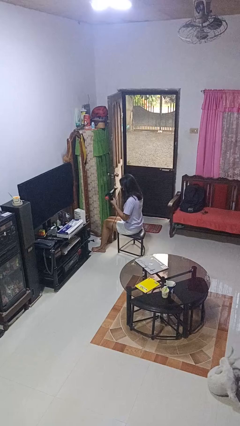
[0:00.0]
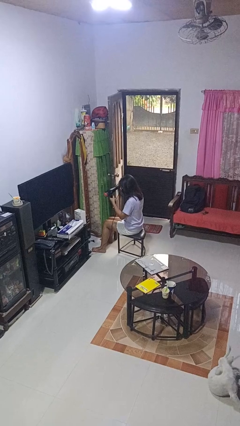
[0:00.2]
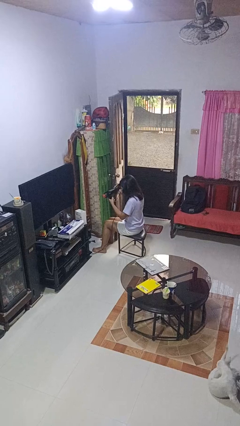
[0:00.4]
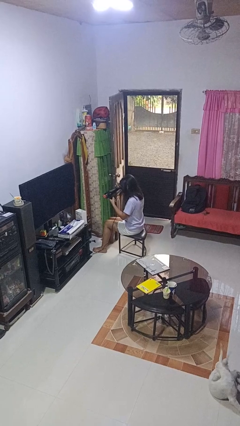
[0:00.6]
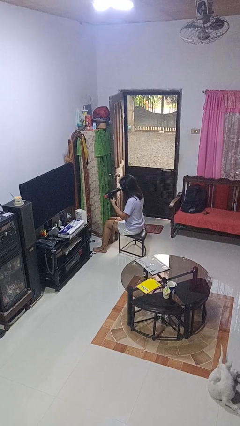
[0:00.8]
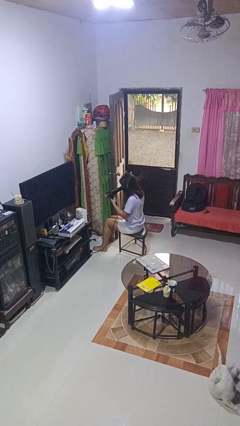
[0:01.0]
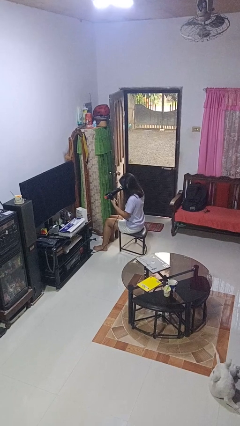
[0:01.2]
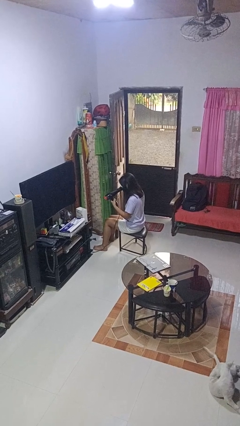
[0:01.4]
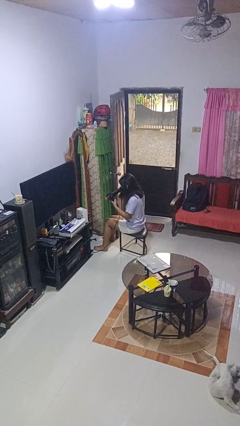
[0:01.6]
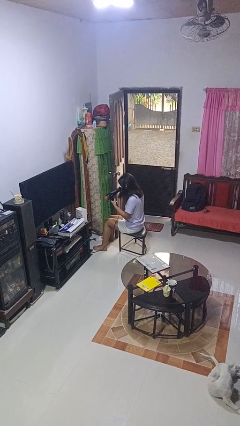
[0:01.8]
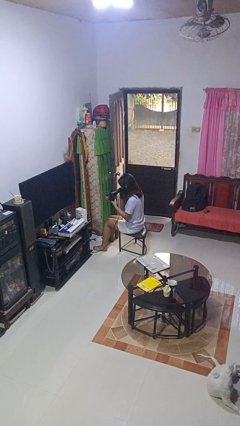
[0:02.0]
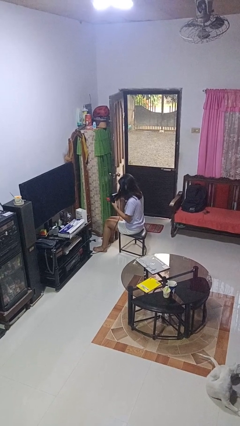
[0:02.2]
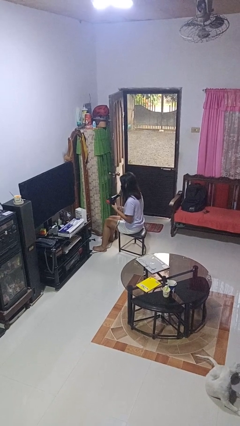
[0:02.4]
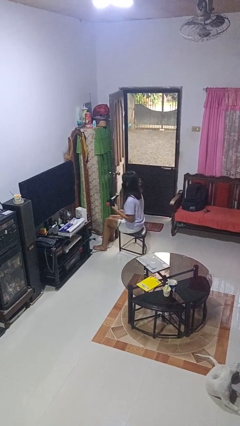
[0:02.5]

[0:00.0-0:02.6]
person dries hair with hairdryer

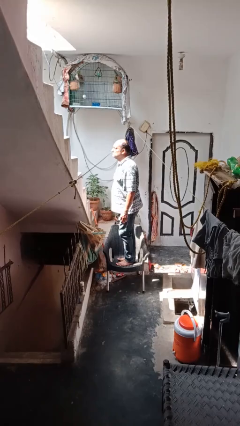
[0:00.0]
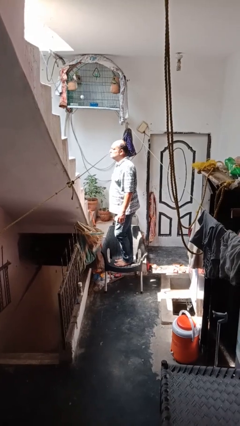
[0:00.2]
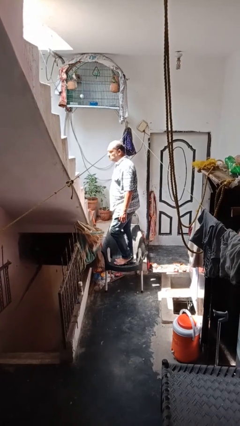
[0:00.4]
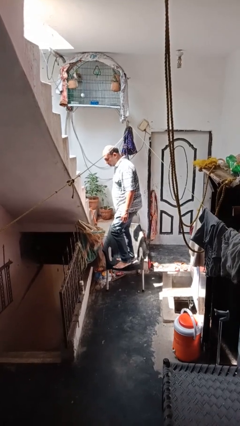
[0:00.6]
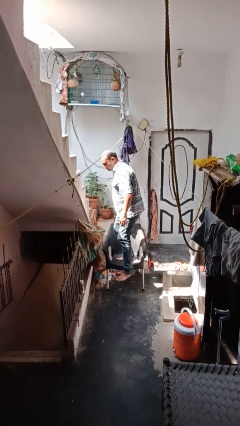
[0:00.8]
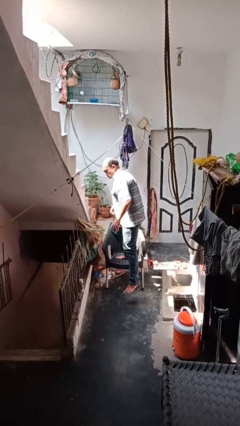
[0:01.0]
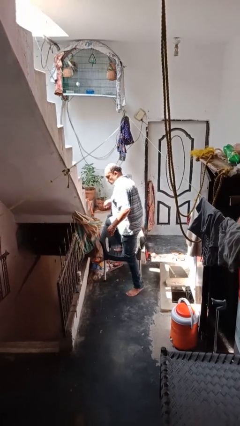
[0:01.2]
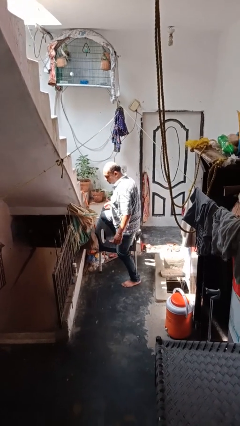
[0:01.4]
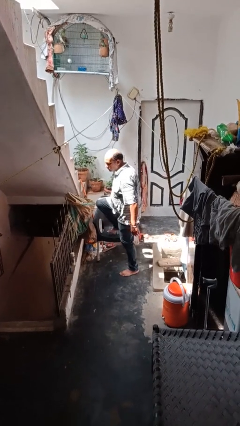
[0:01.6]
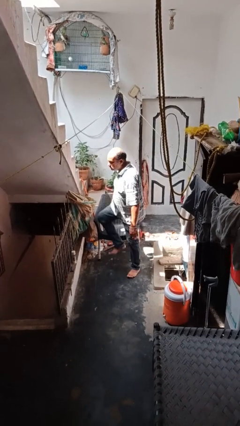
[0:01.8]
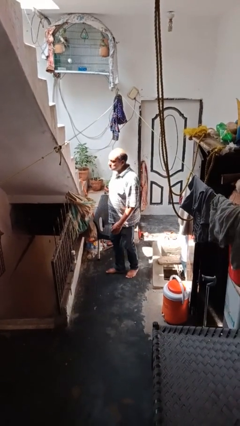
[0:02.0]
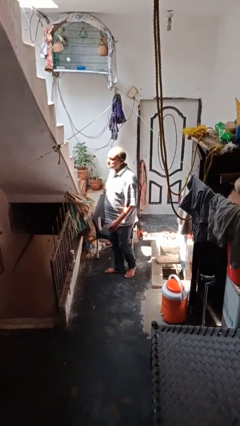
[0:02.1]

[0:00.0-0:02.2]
person climbs off chair

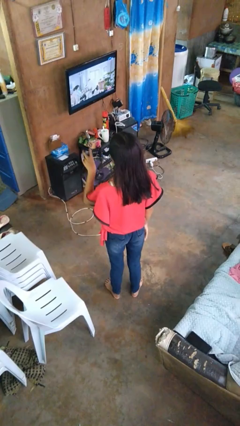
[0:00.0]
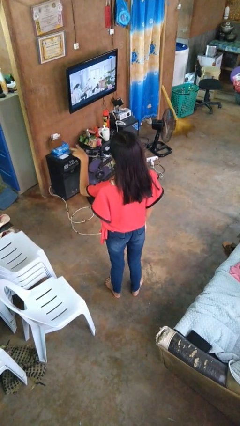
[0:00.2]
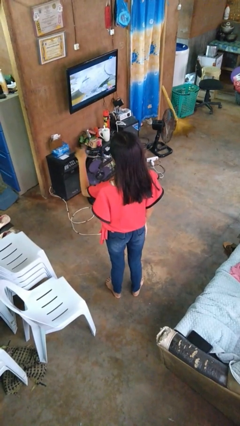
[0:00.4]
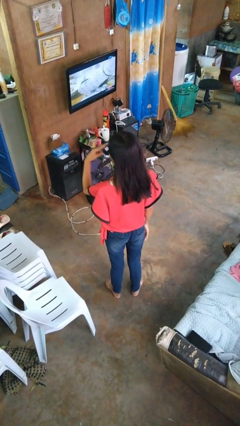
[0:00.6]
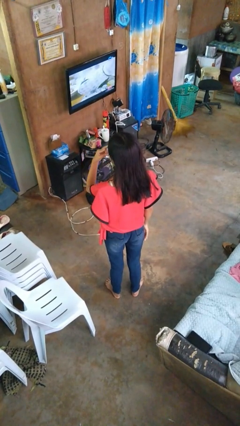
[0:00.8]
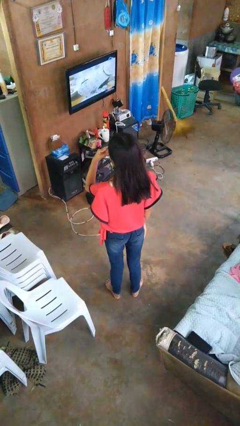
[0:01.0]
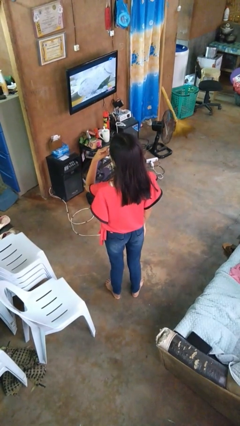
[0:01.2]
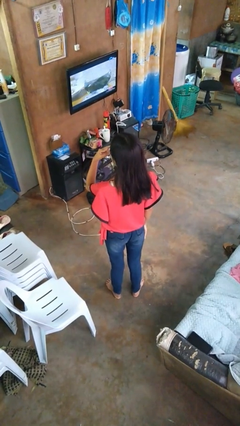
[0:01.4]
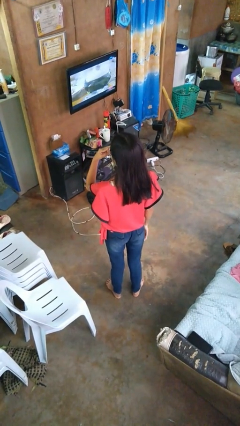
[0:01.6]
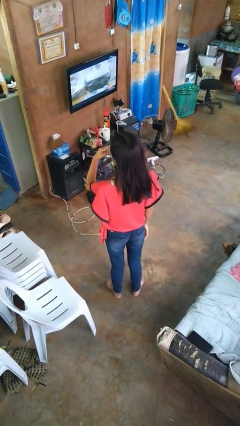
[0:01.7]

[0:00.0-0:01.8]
person gestures watch closely

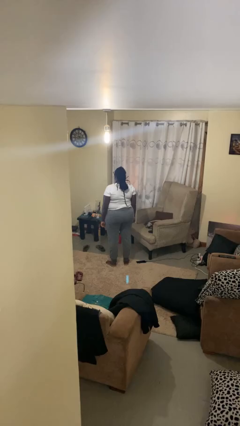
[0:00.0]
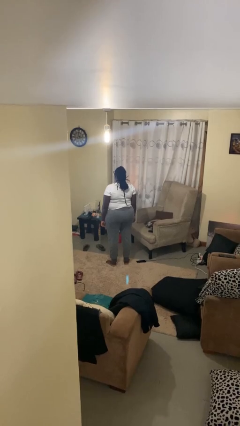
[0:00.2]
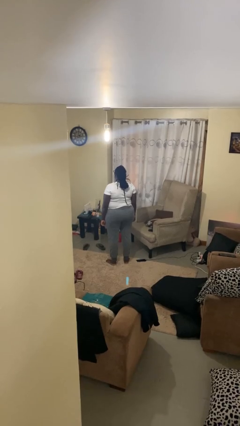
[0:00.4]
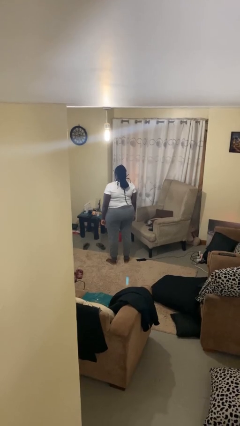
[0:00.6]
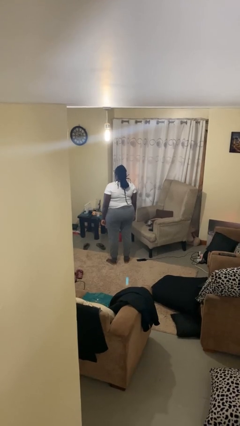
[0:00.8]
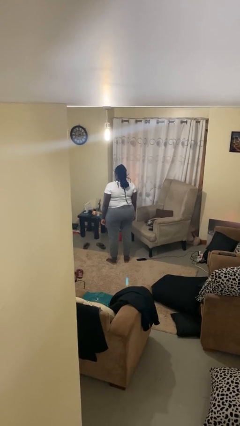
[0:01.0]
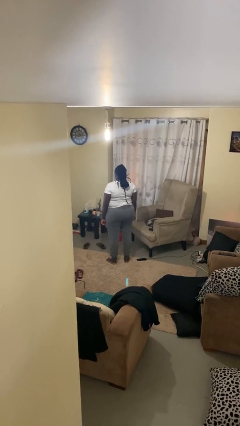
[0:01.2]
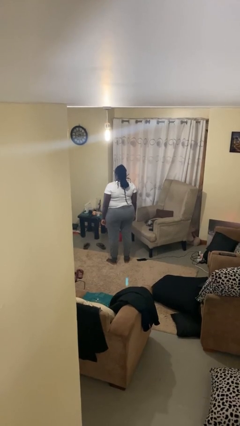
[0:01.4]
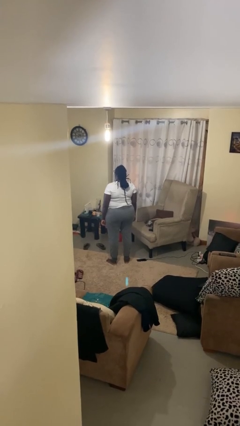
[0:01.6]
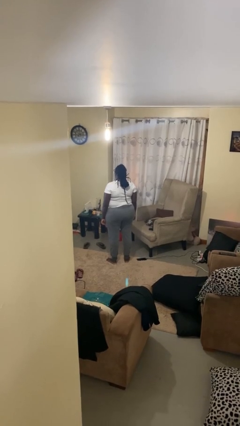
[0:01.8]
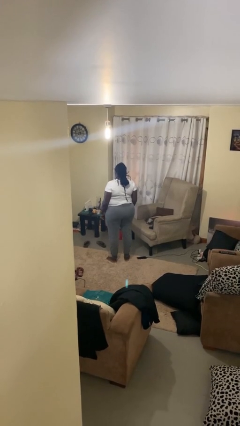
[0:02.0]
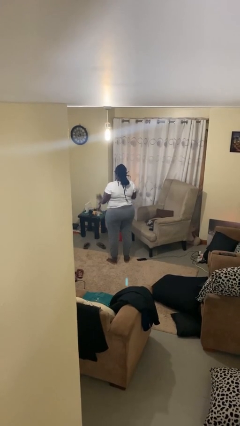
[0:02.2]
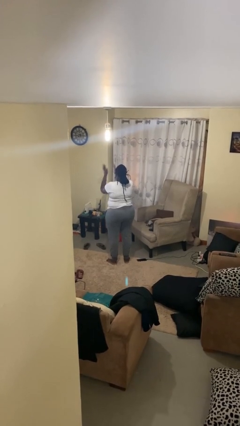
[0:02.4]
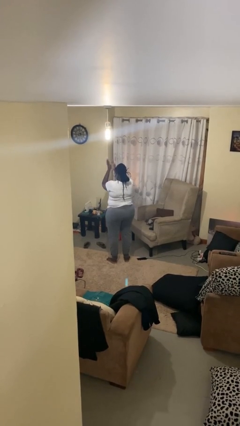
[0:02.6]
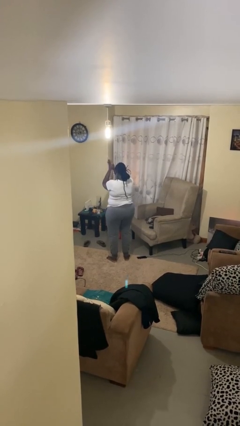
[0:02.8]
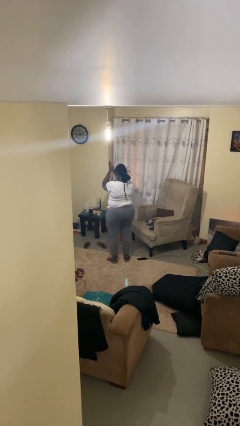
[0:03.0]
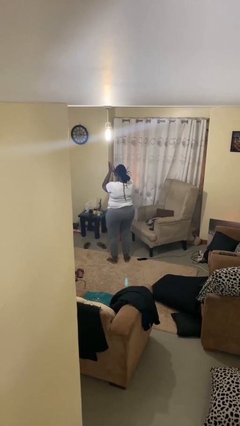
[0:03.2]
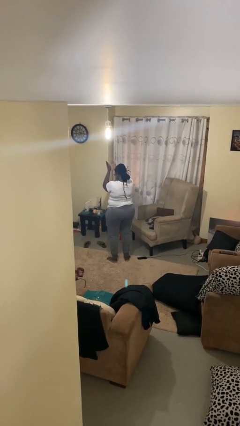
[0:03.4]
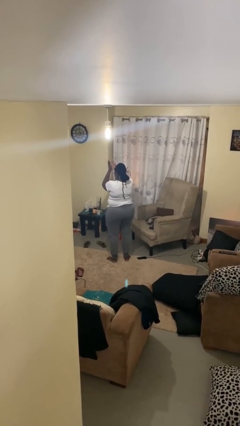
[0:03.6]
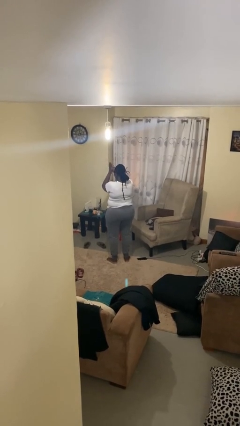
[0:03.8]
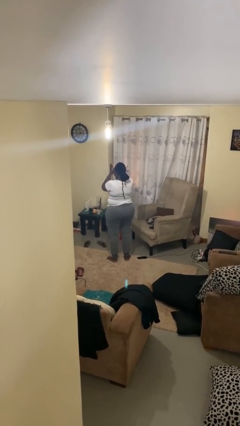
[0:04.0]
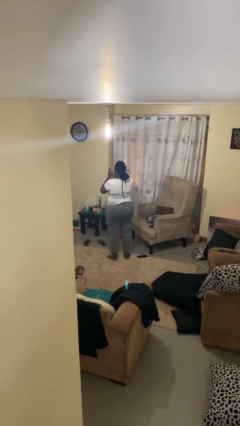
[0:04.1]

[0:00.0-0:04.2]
person claps hands

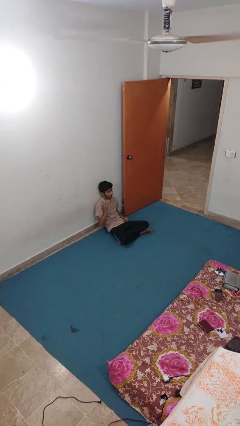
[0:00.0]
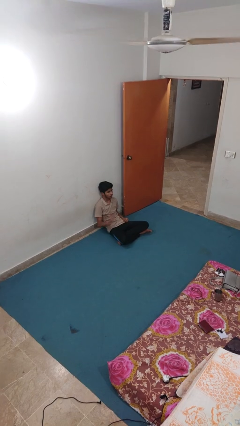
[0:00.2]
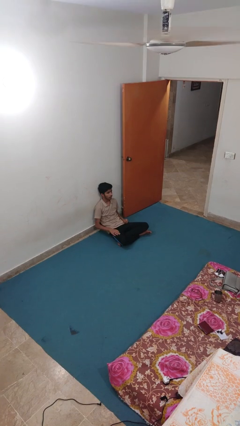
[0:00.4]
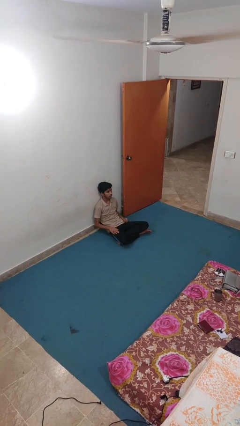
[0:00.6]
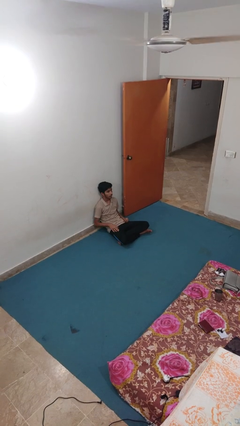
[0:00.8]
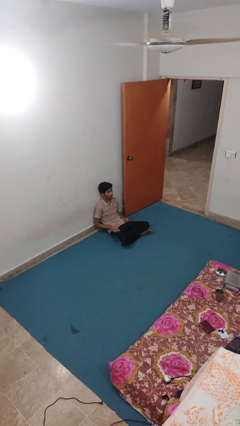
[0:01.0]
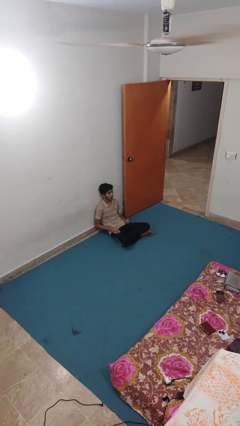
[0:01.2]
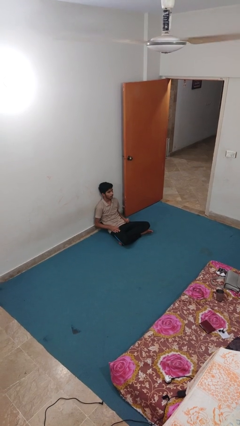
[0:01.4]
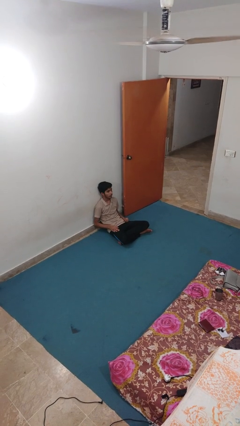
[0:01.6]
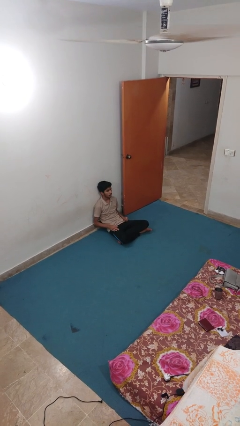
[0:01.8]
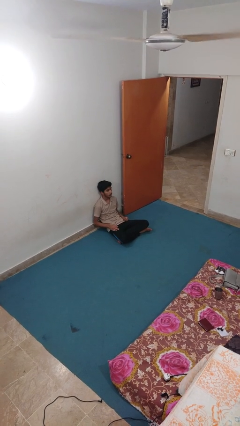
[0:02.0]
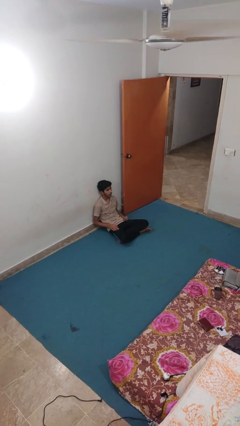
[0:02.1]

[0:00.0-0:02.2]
person slaps hands on thighs

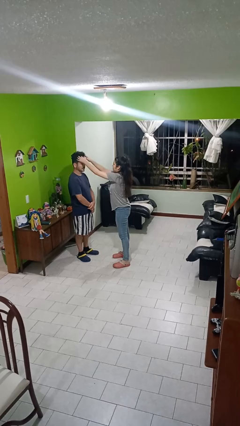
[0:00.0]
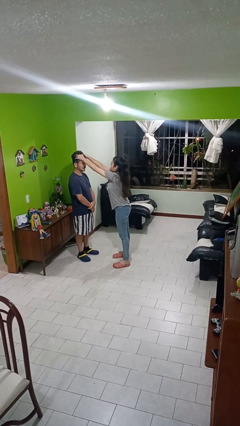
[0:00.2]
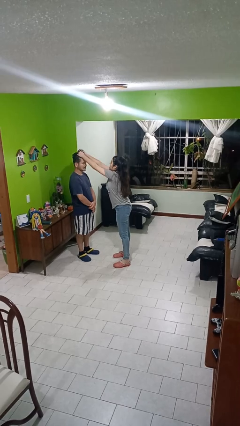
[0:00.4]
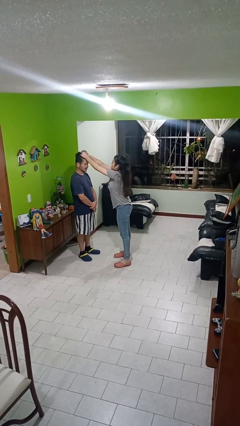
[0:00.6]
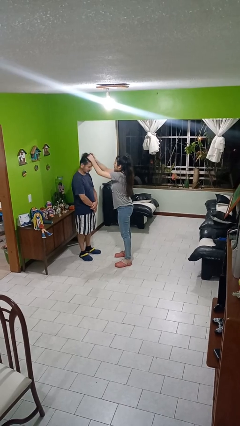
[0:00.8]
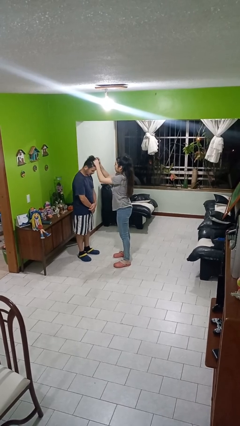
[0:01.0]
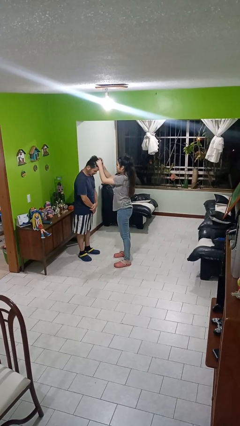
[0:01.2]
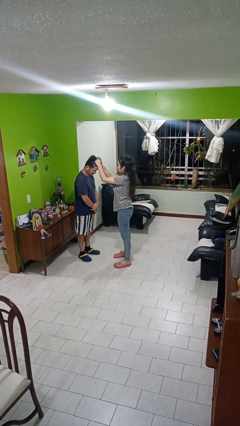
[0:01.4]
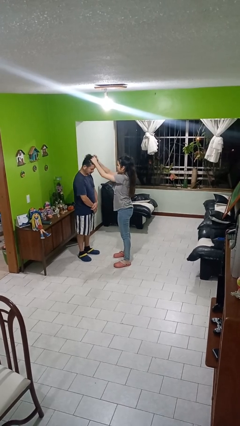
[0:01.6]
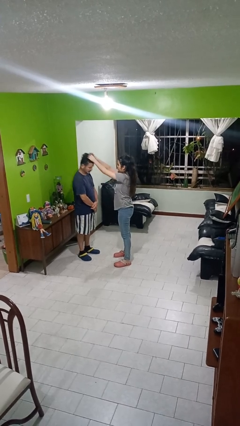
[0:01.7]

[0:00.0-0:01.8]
person grabs person by hair

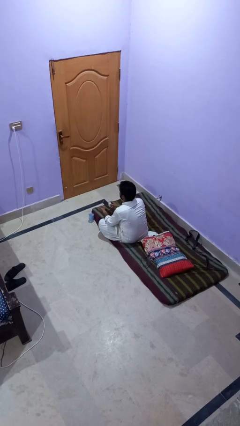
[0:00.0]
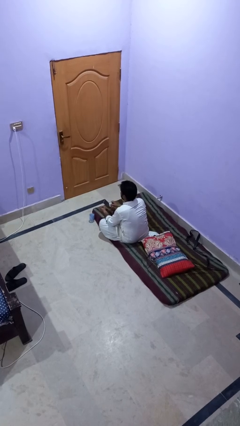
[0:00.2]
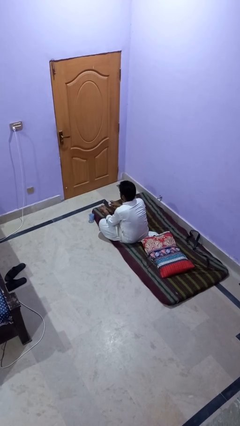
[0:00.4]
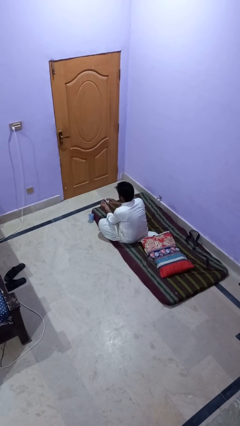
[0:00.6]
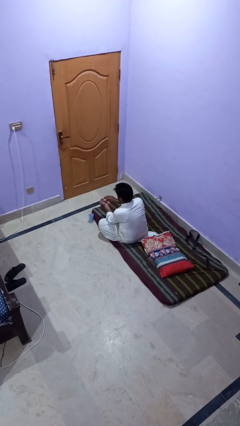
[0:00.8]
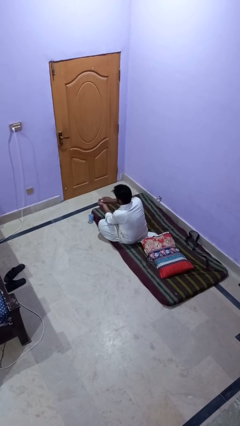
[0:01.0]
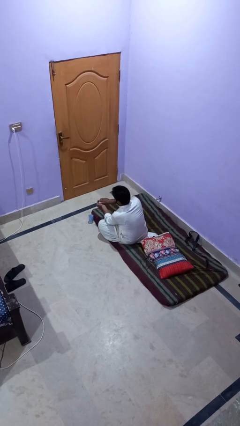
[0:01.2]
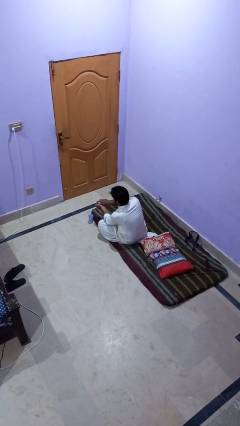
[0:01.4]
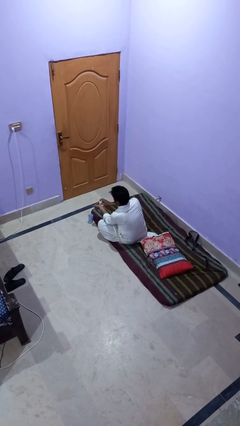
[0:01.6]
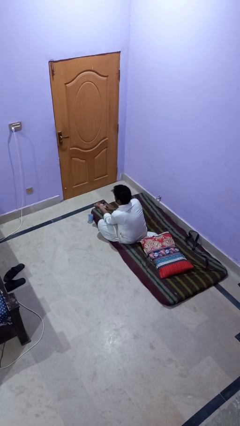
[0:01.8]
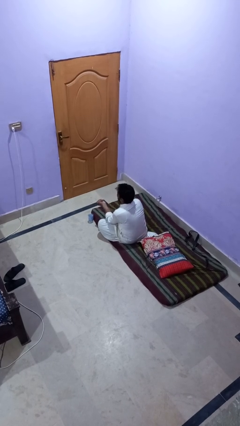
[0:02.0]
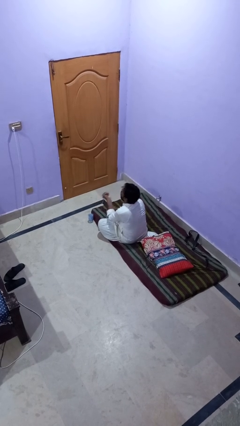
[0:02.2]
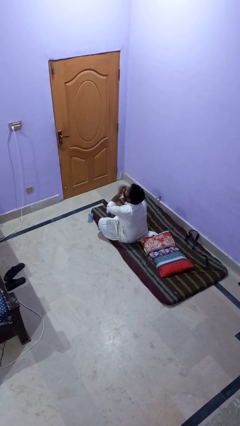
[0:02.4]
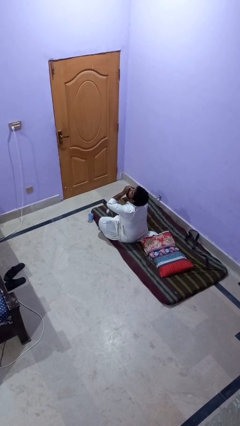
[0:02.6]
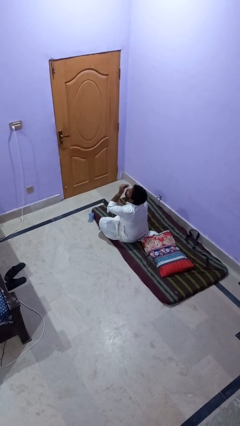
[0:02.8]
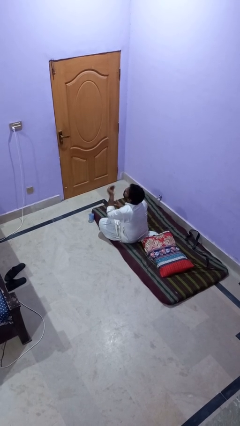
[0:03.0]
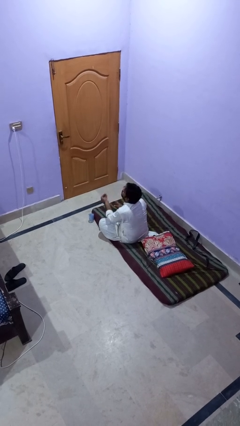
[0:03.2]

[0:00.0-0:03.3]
person takes medicine pills
